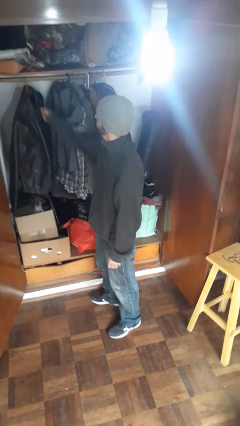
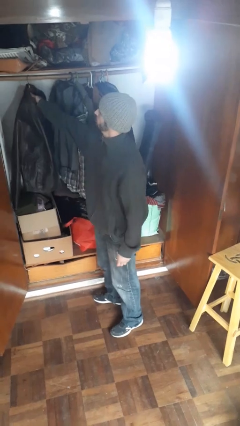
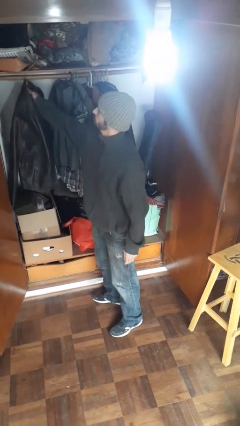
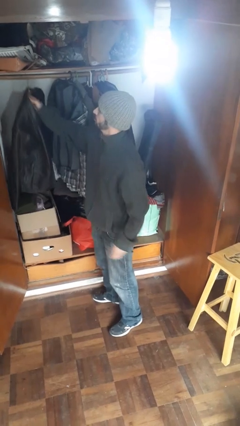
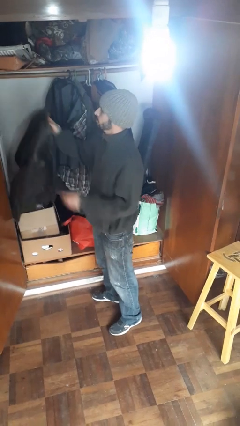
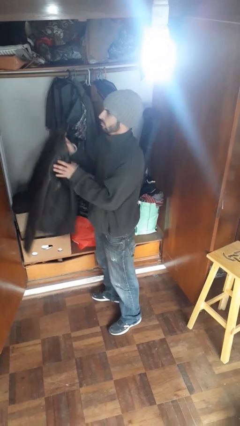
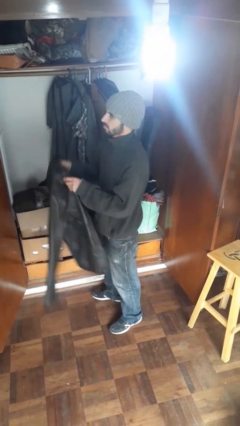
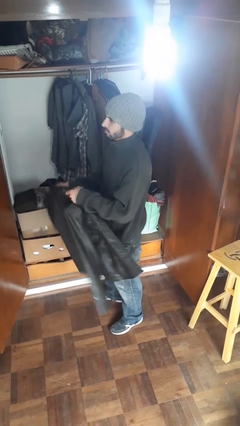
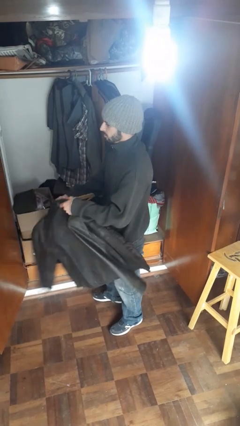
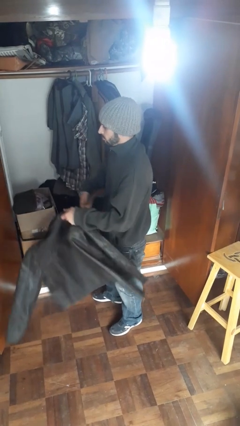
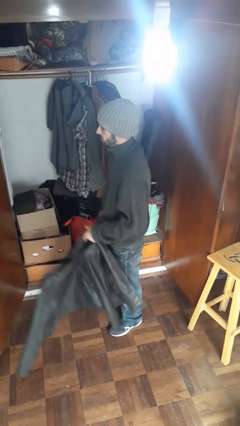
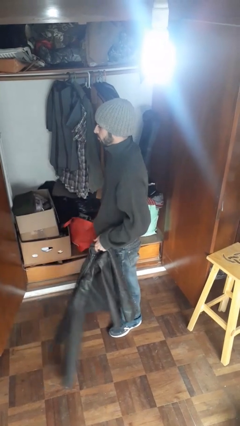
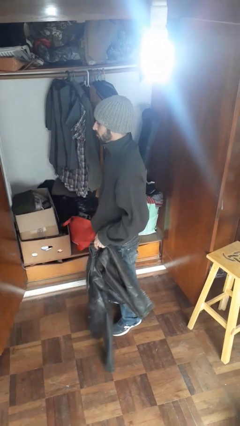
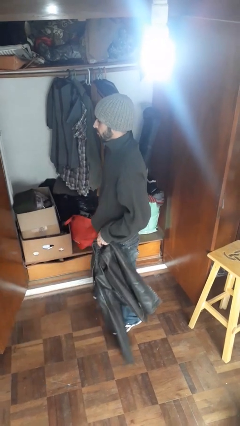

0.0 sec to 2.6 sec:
person takes clothes from closet

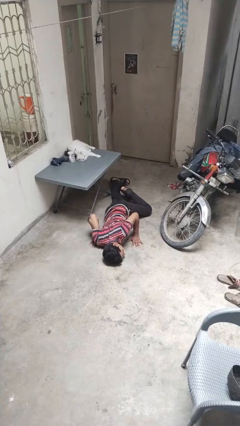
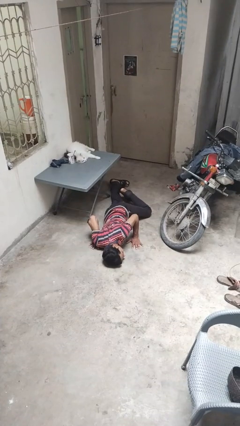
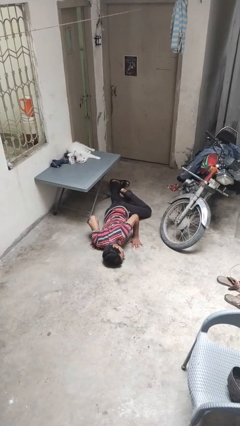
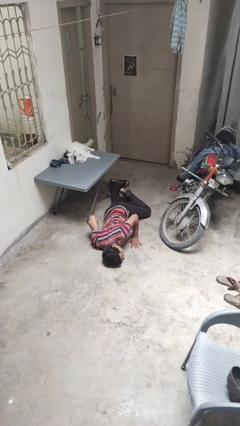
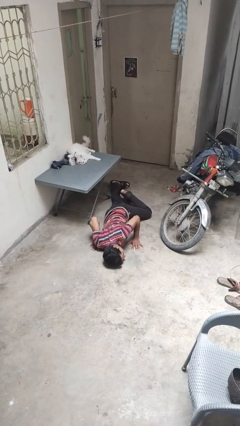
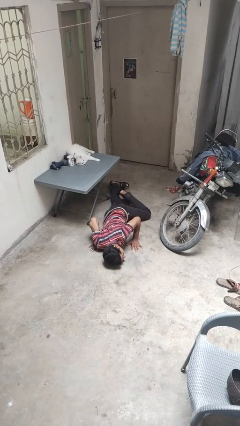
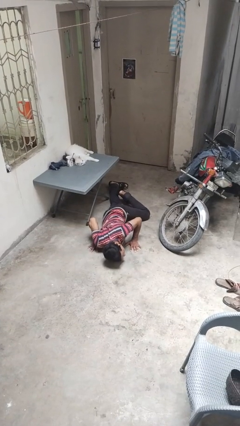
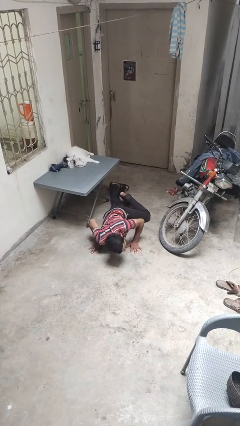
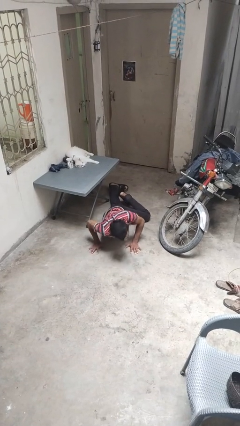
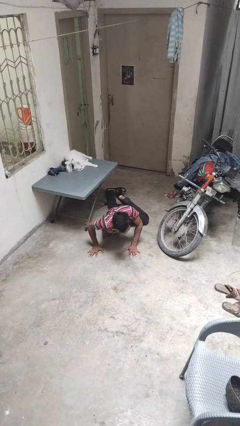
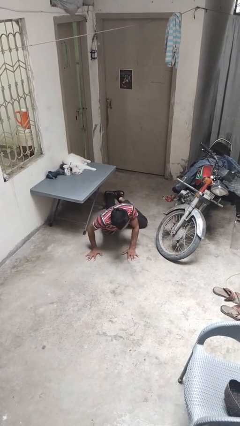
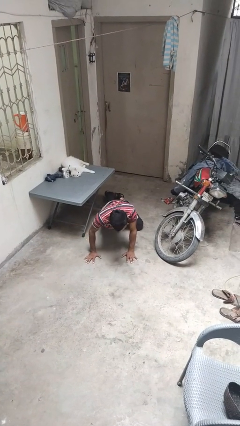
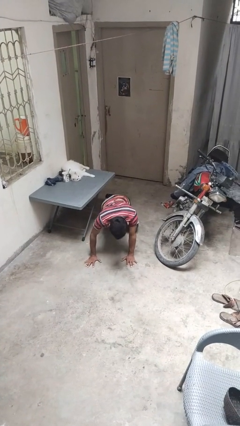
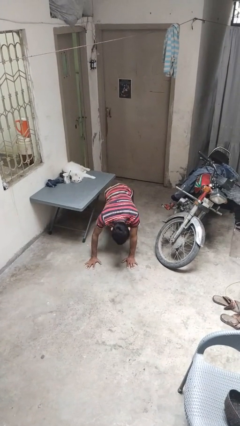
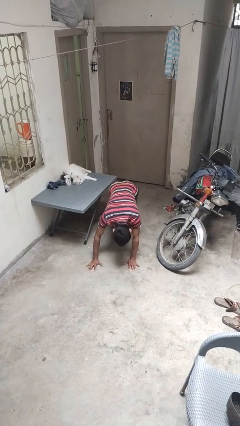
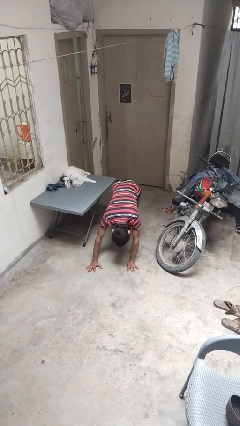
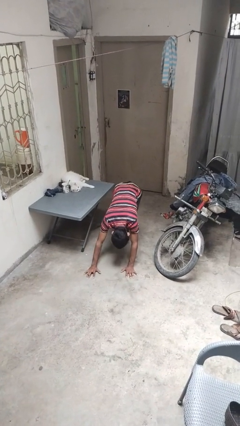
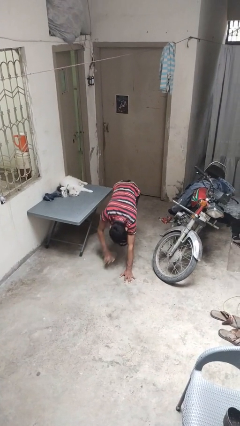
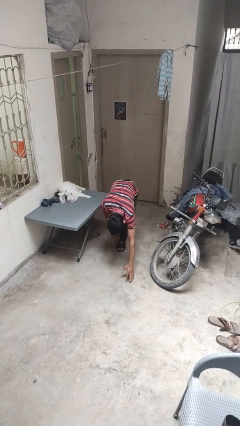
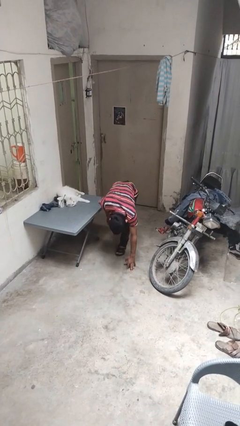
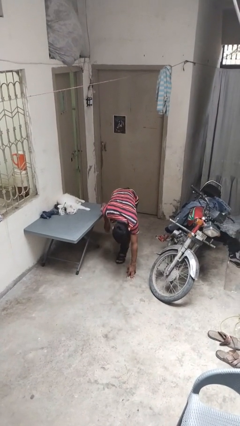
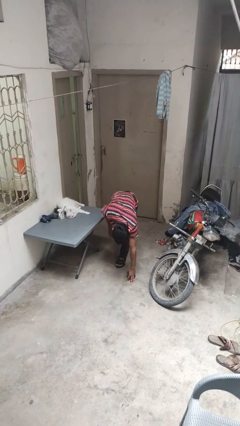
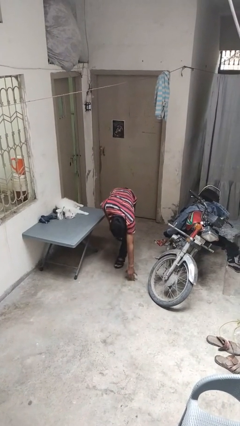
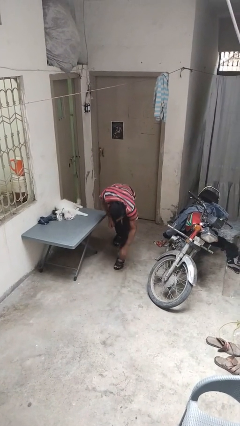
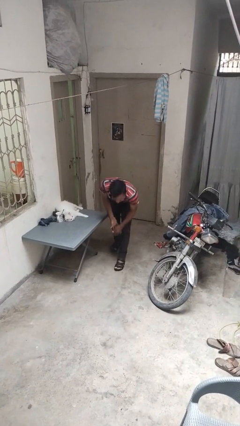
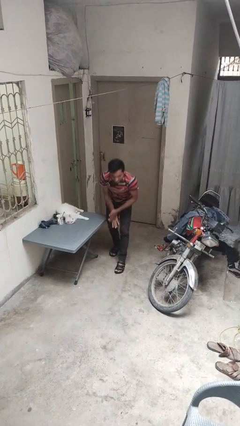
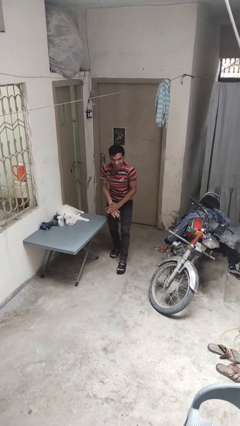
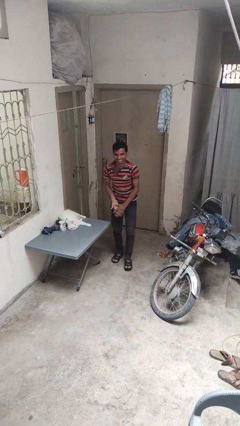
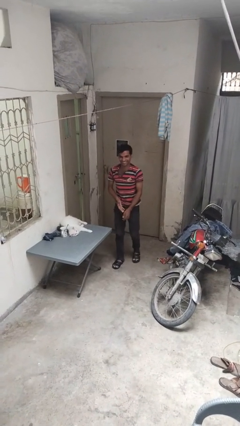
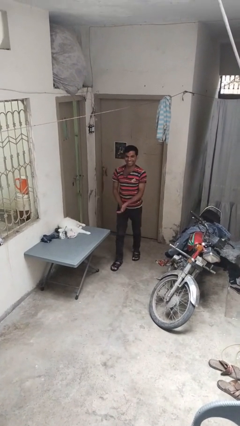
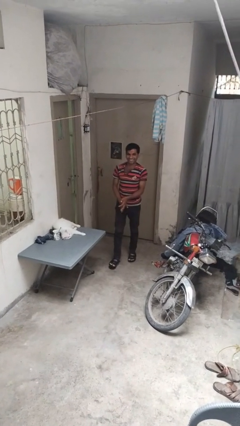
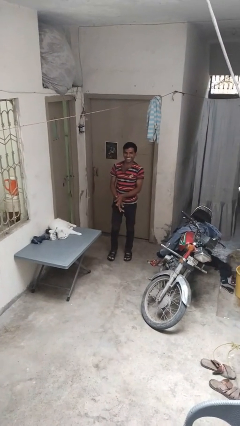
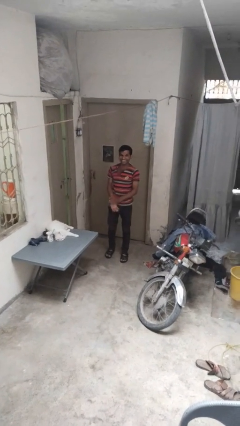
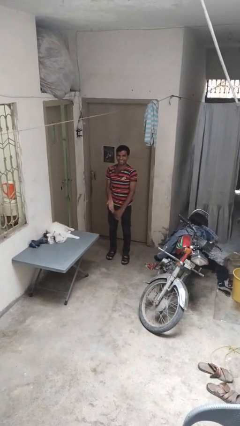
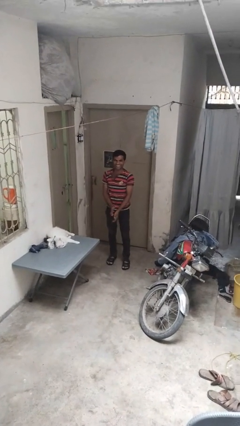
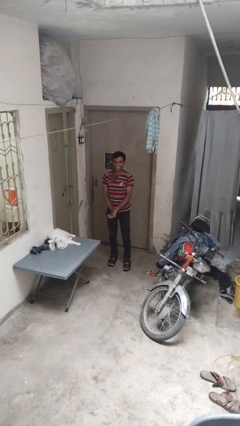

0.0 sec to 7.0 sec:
person stands up from floor

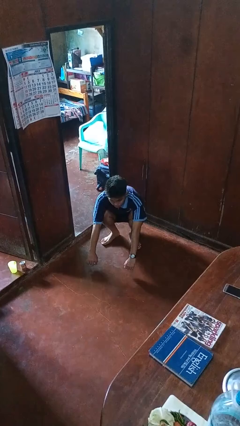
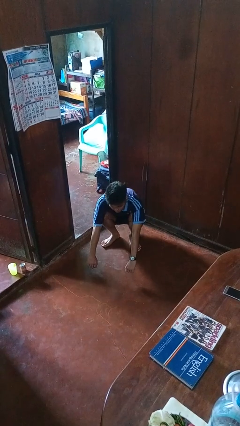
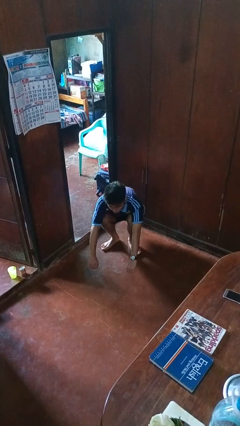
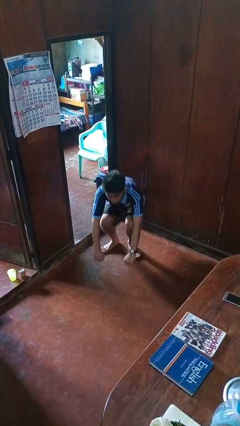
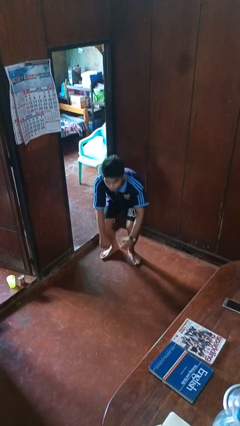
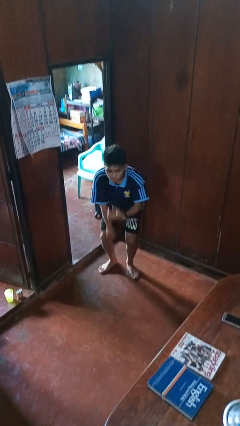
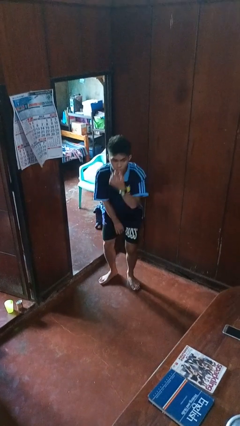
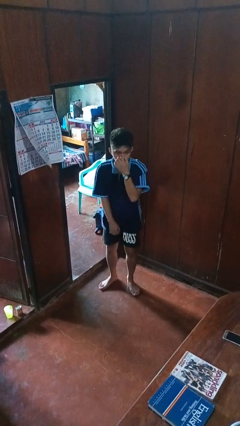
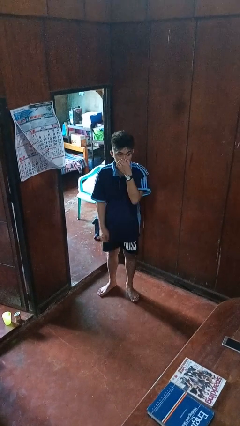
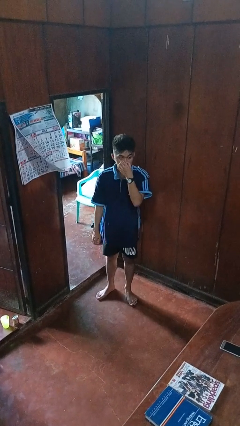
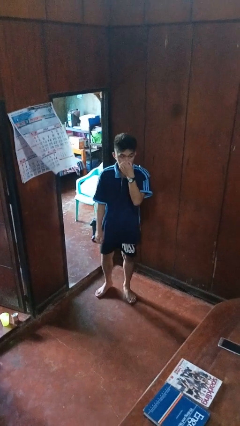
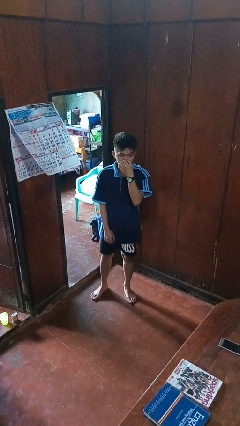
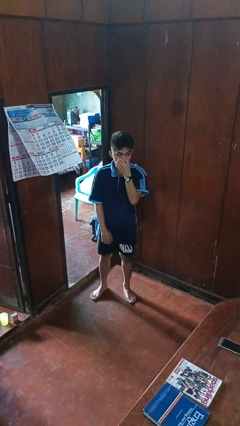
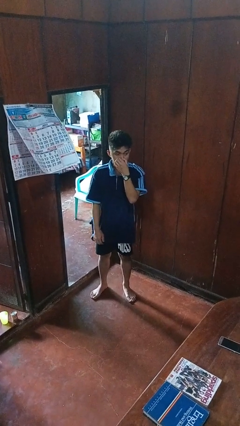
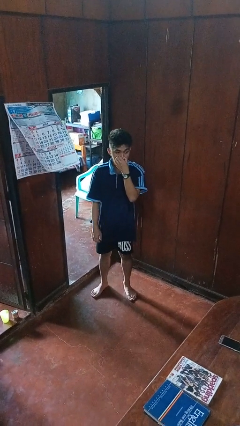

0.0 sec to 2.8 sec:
person stands up

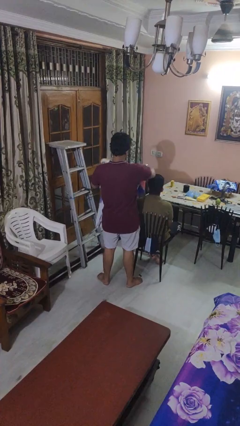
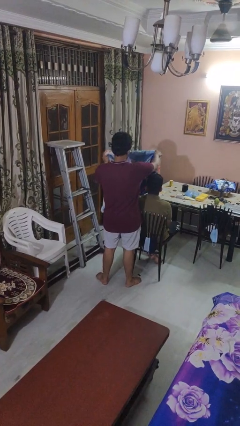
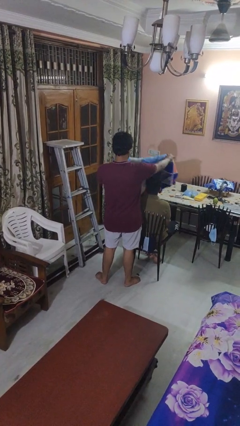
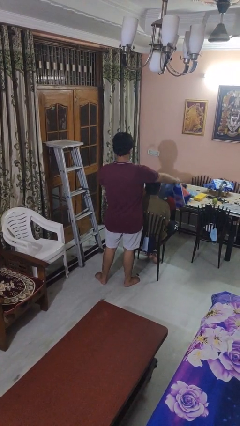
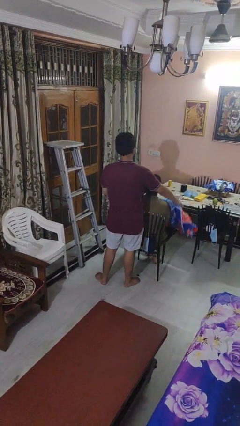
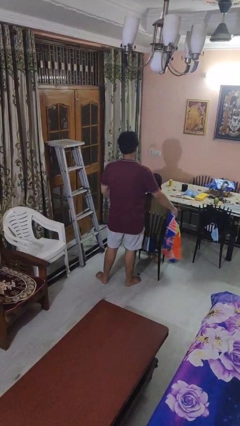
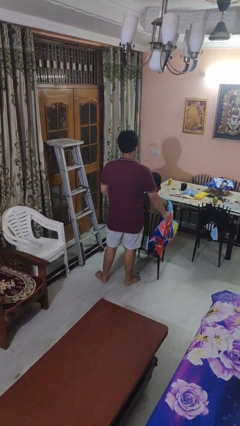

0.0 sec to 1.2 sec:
person covers friend with blanket

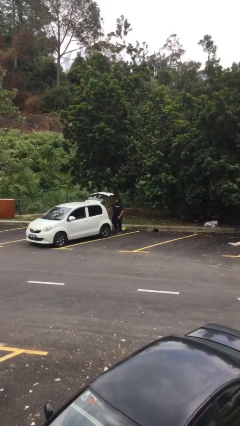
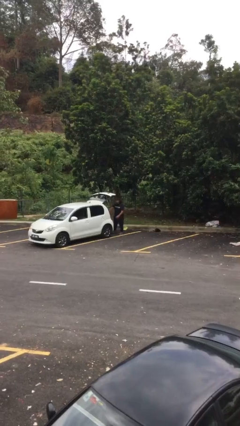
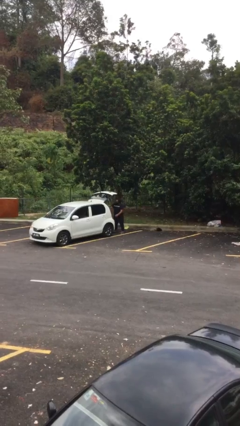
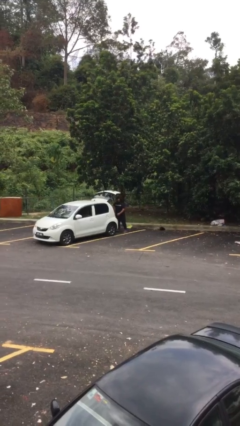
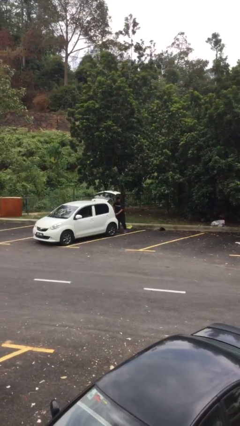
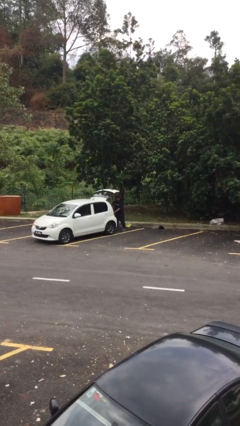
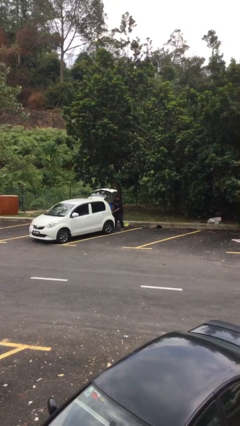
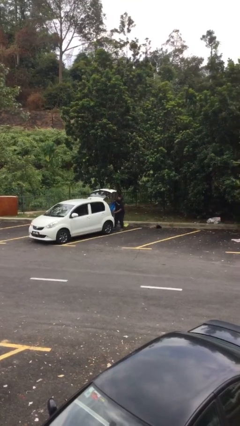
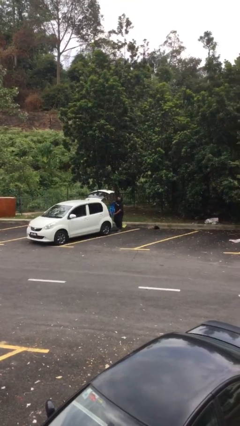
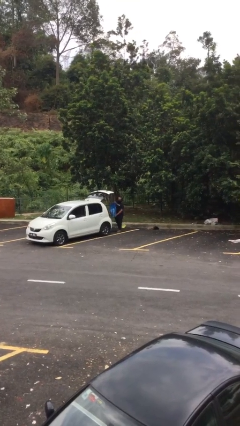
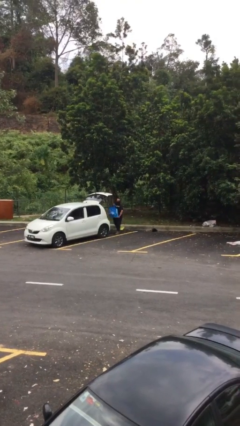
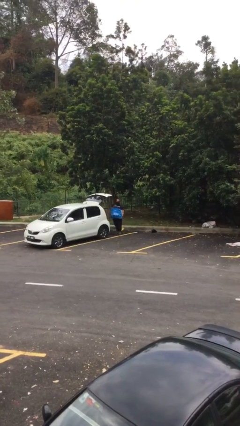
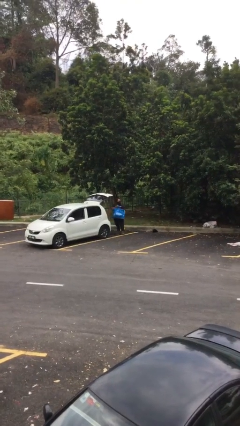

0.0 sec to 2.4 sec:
person unloads car

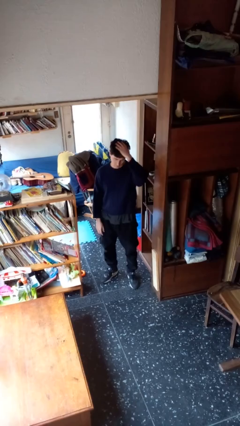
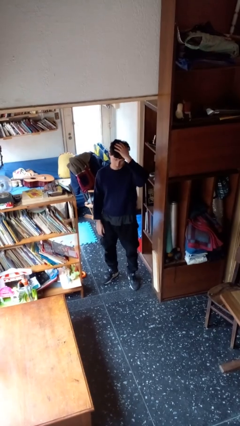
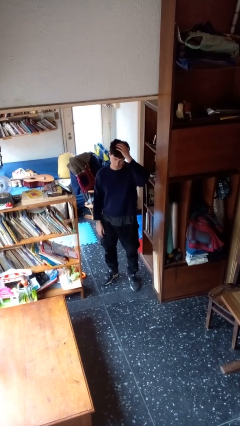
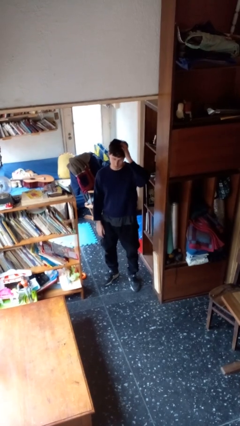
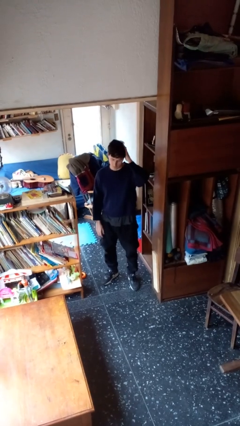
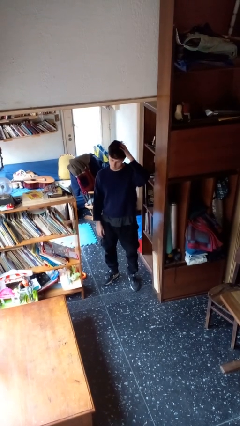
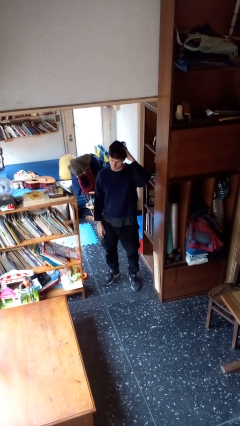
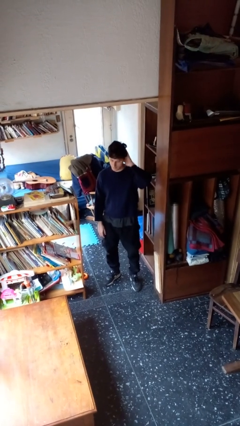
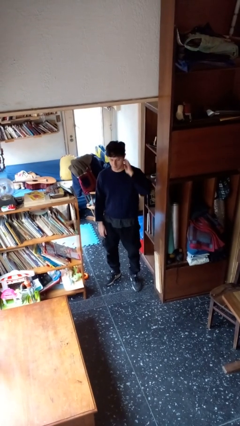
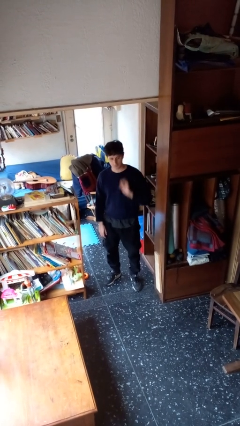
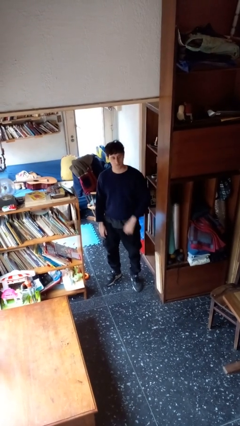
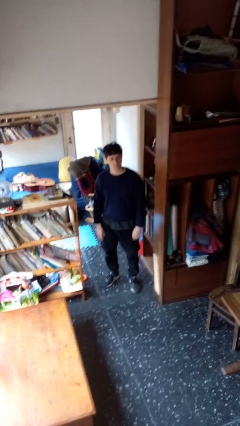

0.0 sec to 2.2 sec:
person pats head
